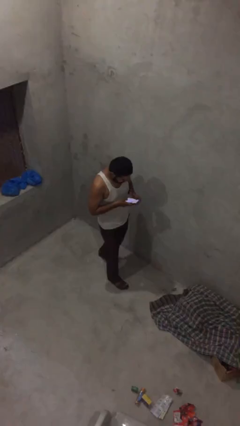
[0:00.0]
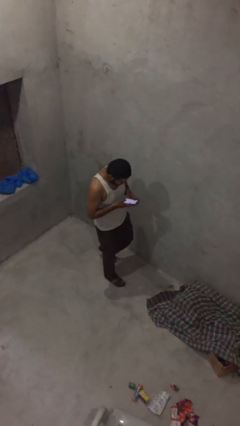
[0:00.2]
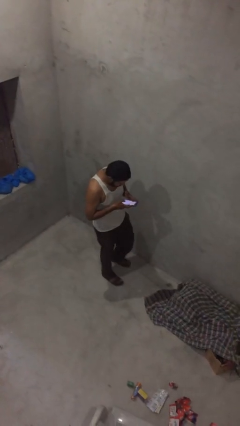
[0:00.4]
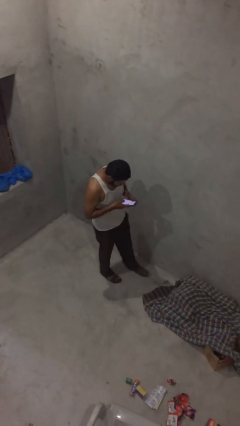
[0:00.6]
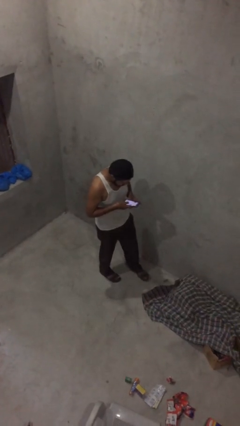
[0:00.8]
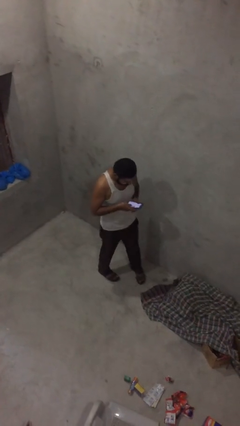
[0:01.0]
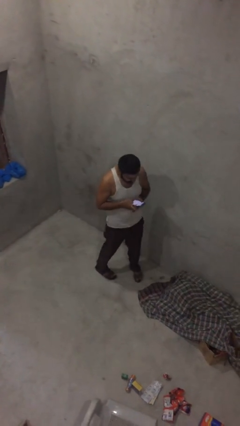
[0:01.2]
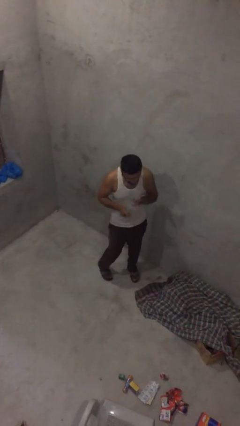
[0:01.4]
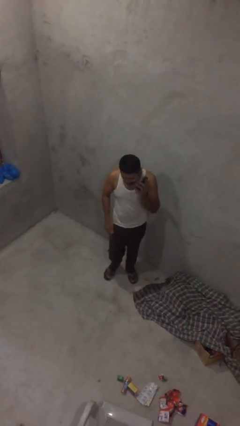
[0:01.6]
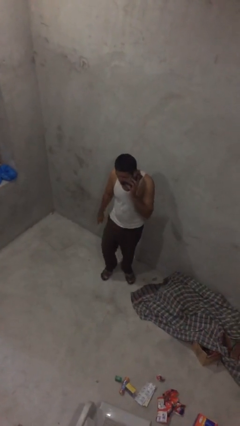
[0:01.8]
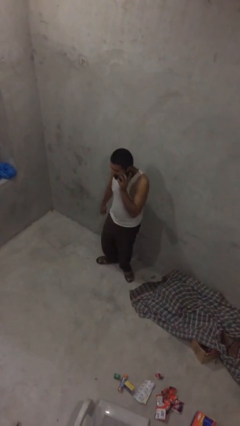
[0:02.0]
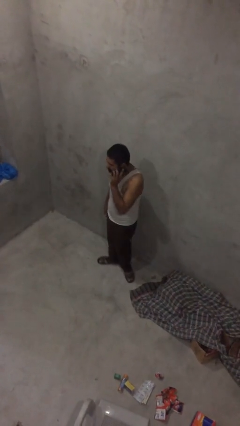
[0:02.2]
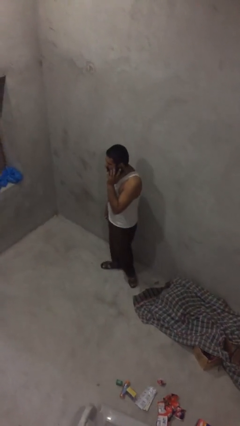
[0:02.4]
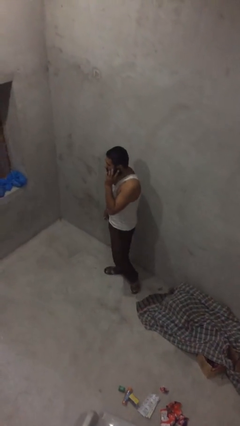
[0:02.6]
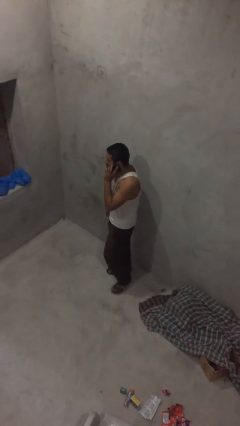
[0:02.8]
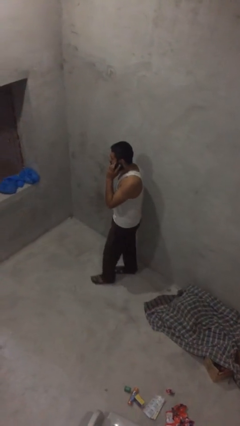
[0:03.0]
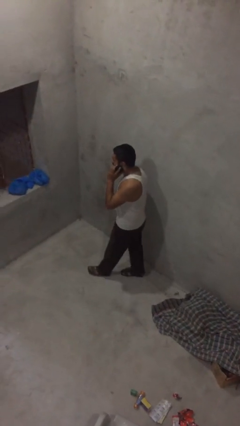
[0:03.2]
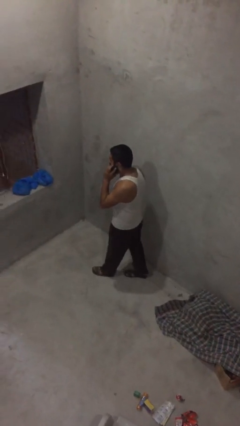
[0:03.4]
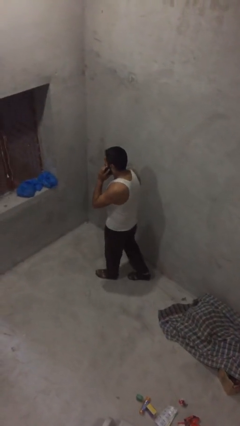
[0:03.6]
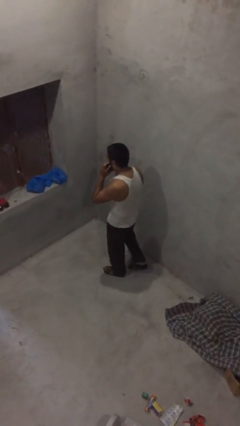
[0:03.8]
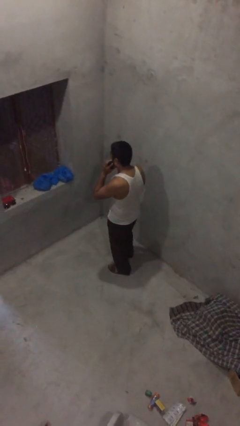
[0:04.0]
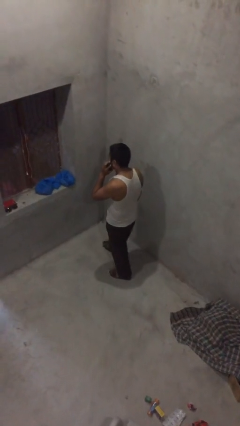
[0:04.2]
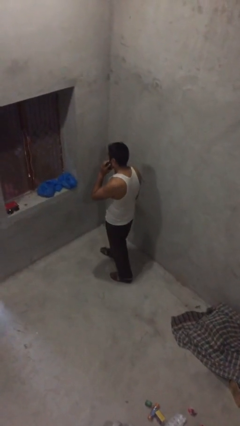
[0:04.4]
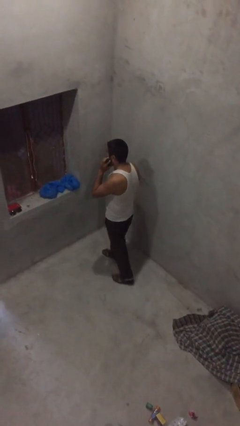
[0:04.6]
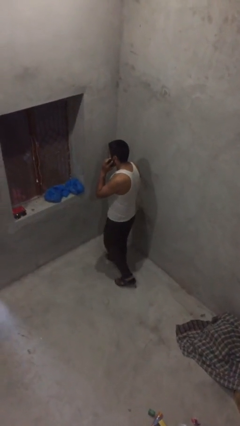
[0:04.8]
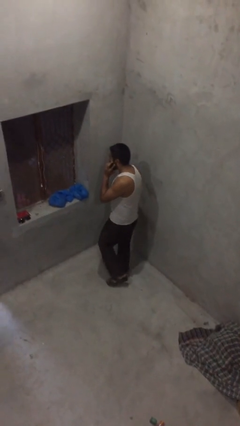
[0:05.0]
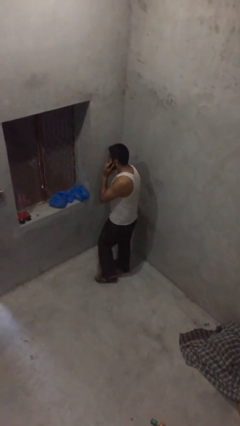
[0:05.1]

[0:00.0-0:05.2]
person talks on phone

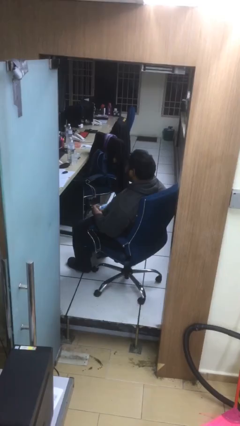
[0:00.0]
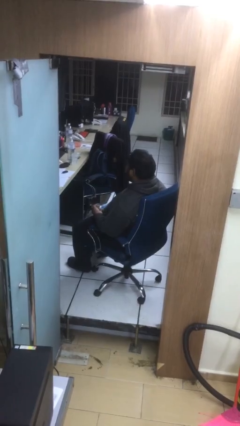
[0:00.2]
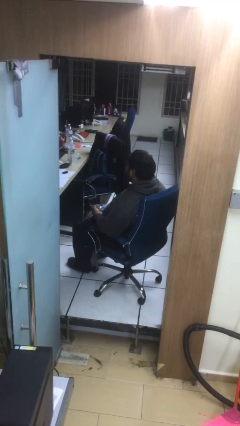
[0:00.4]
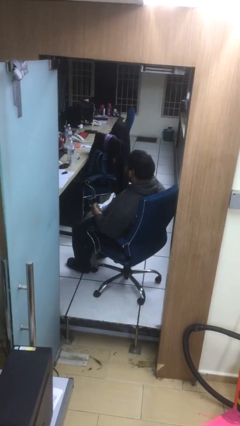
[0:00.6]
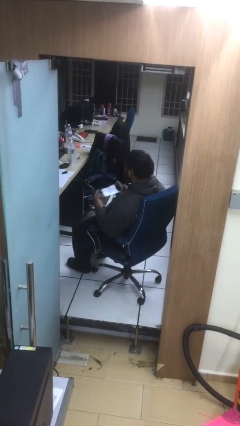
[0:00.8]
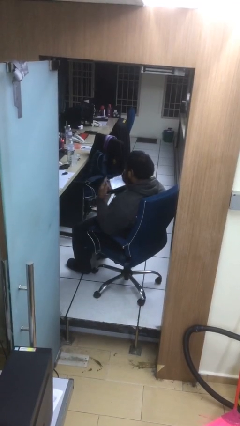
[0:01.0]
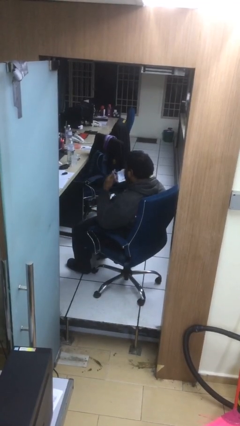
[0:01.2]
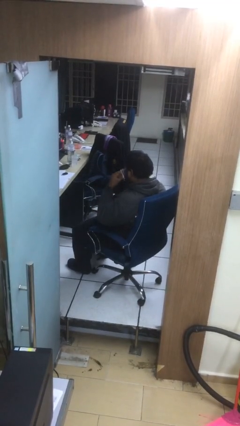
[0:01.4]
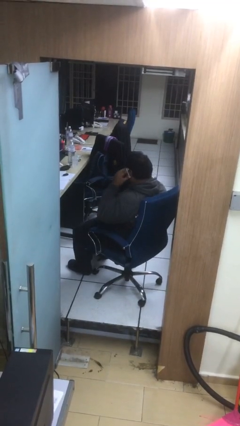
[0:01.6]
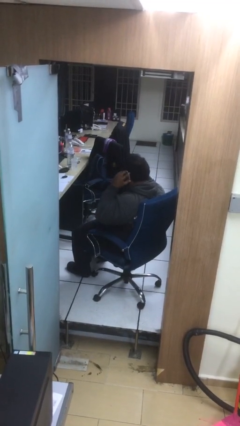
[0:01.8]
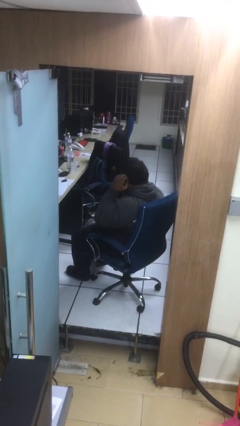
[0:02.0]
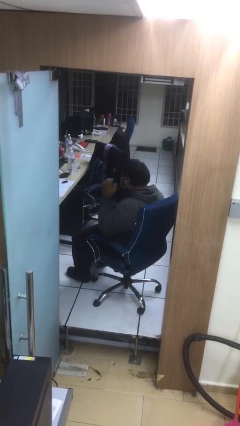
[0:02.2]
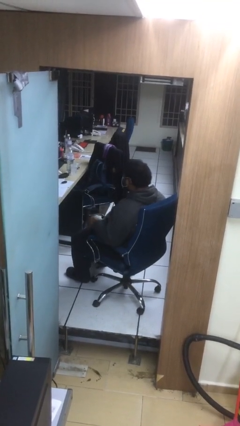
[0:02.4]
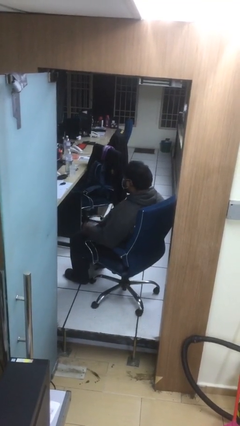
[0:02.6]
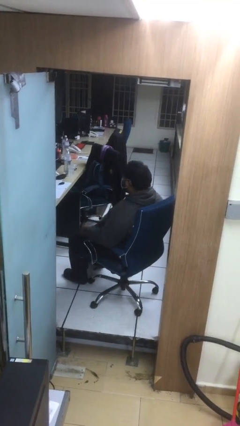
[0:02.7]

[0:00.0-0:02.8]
person puts on facemask

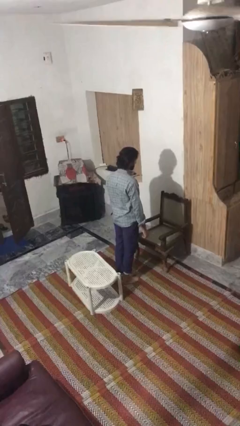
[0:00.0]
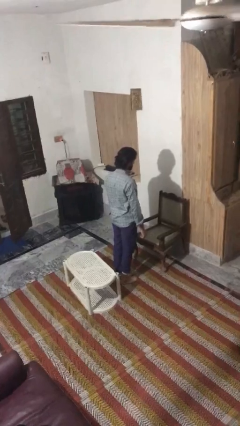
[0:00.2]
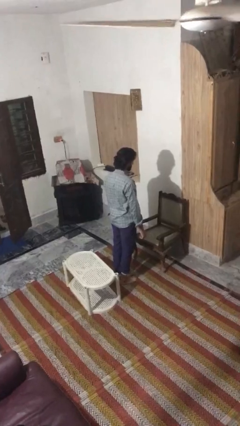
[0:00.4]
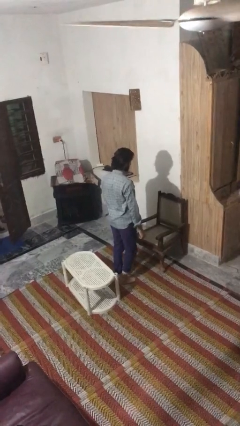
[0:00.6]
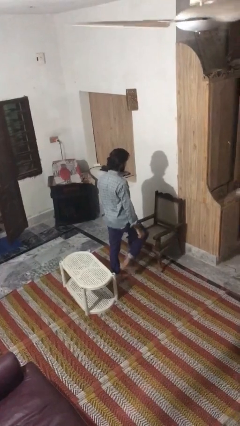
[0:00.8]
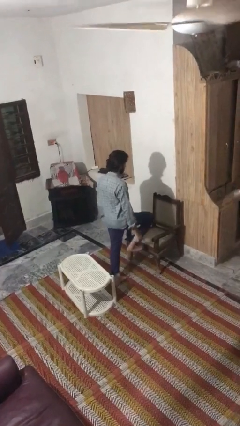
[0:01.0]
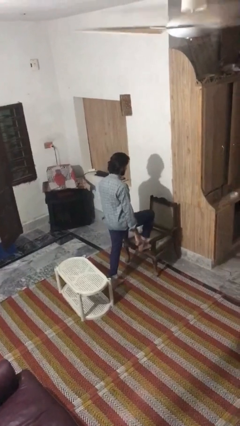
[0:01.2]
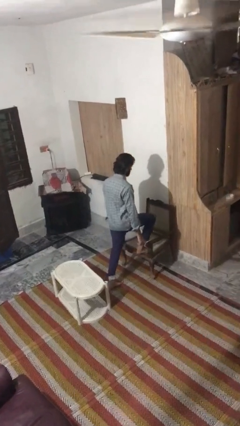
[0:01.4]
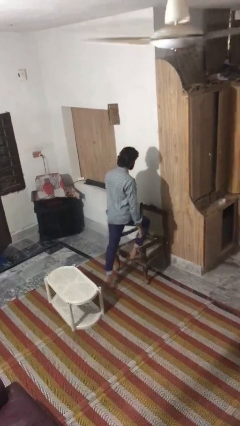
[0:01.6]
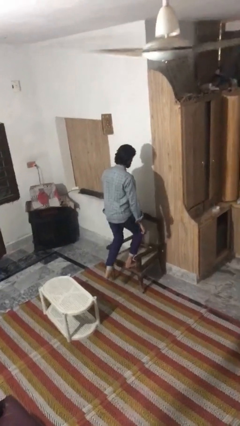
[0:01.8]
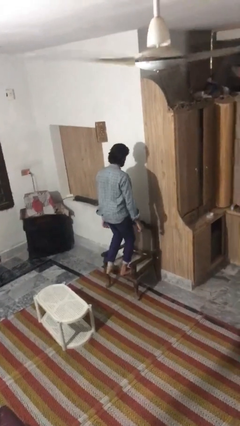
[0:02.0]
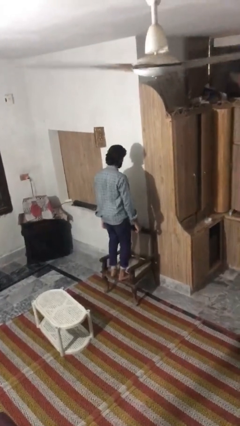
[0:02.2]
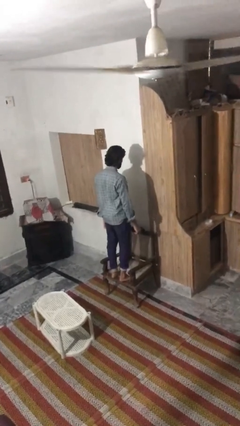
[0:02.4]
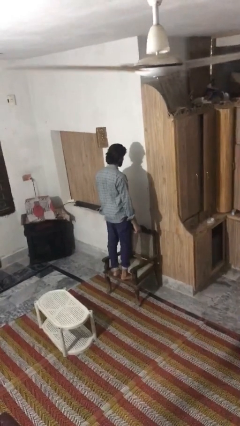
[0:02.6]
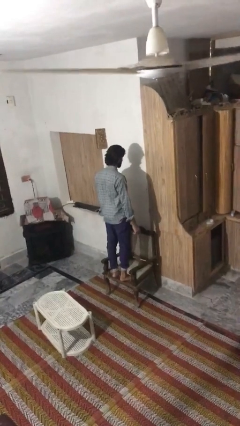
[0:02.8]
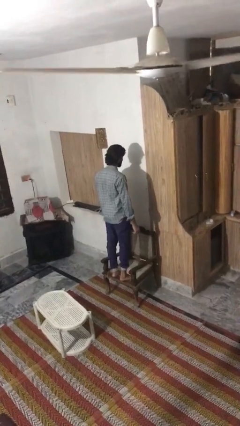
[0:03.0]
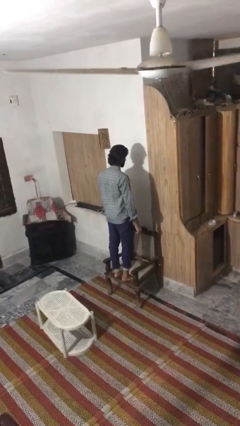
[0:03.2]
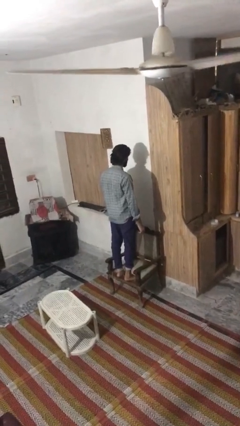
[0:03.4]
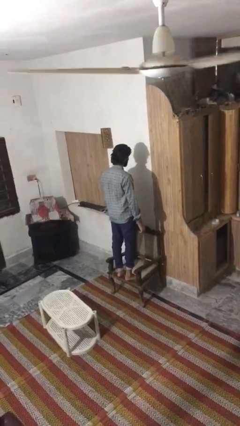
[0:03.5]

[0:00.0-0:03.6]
person climbs on chair

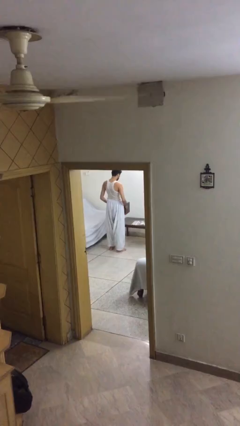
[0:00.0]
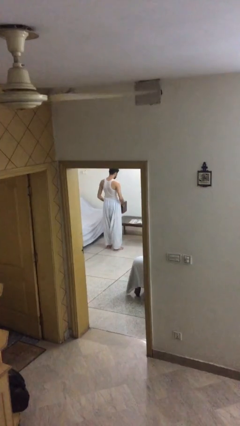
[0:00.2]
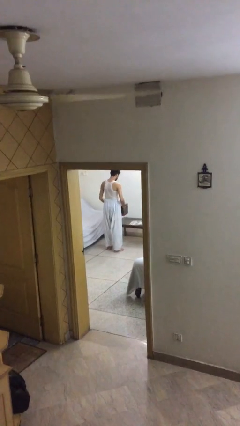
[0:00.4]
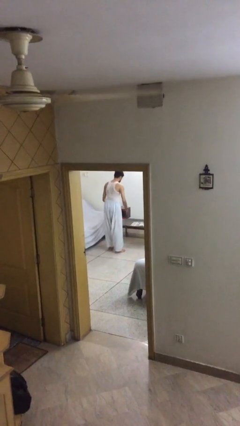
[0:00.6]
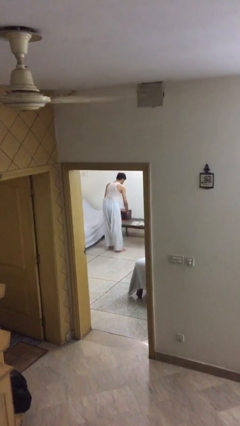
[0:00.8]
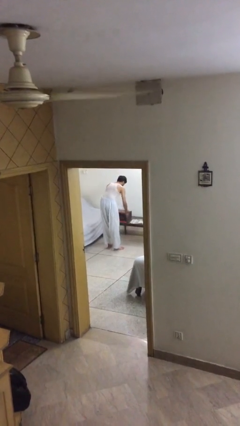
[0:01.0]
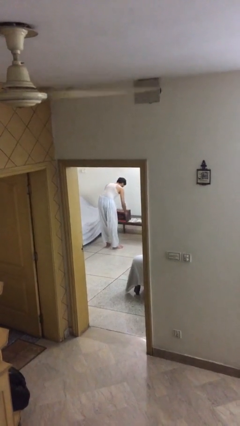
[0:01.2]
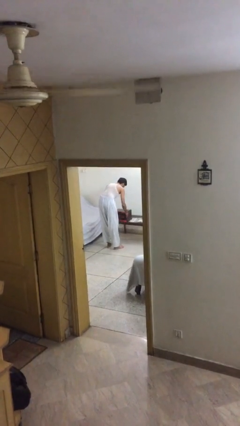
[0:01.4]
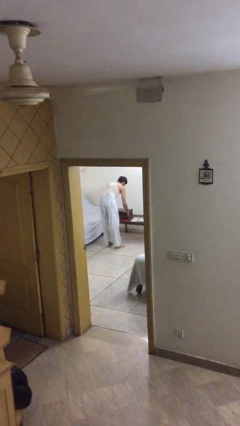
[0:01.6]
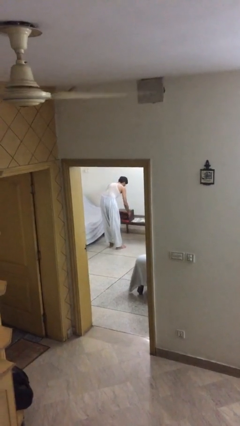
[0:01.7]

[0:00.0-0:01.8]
person puts down object on table

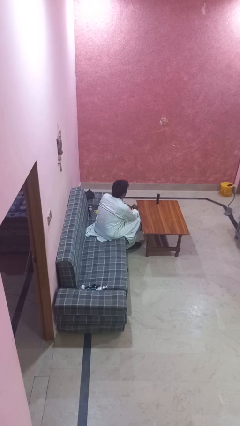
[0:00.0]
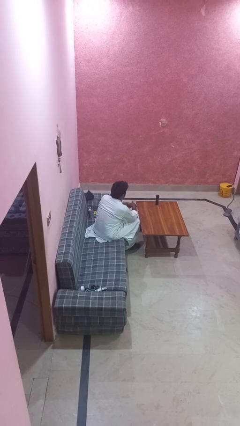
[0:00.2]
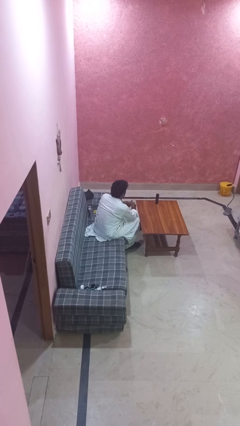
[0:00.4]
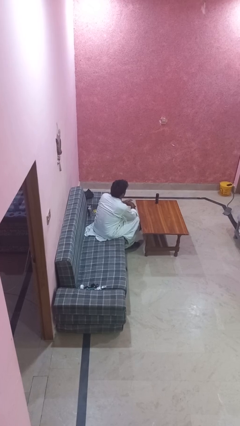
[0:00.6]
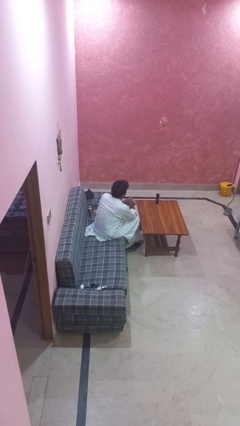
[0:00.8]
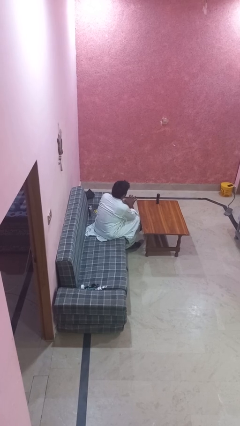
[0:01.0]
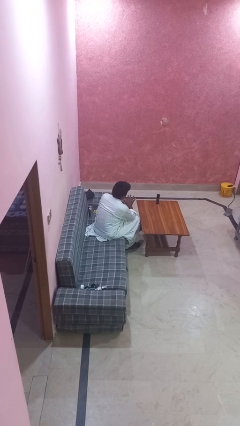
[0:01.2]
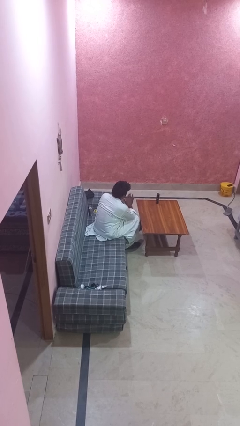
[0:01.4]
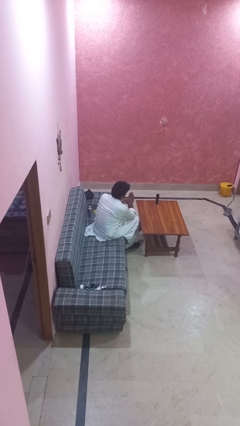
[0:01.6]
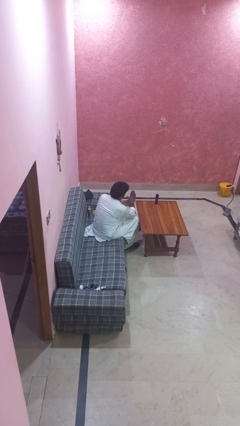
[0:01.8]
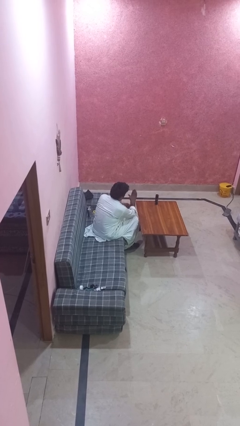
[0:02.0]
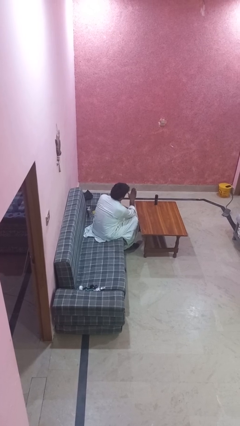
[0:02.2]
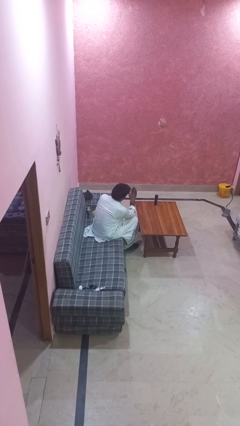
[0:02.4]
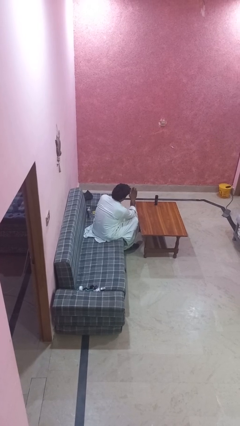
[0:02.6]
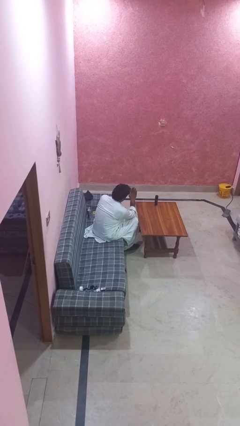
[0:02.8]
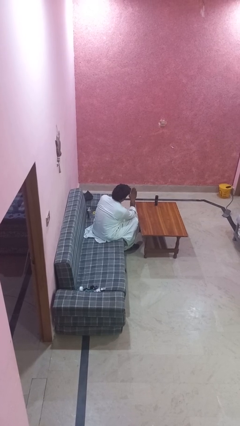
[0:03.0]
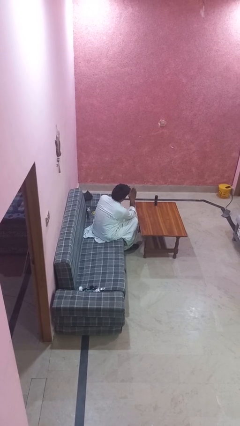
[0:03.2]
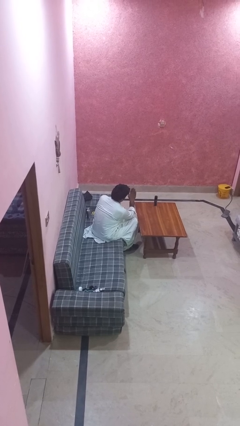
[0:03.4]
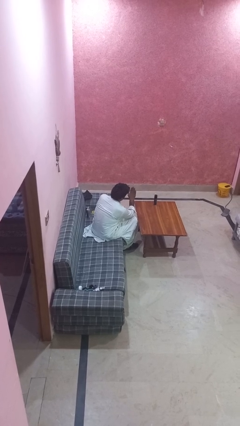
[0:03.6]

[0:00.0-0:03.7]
person puts on ring

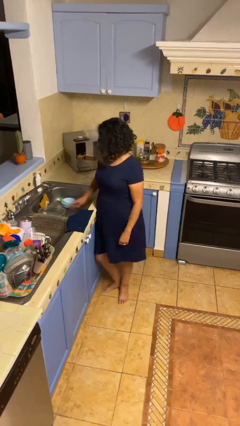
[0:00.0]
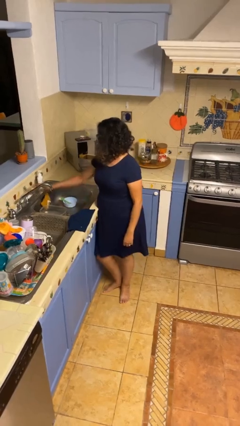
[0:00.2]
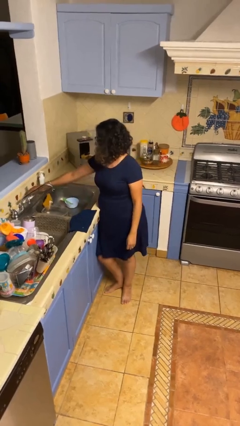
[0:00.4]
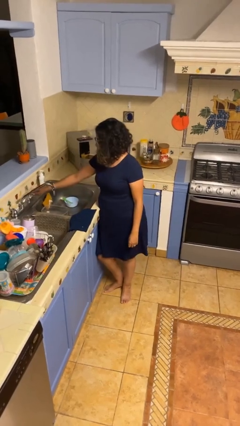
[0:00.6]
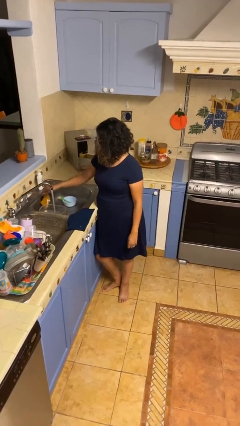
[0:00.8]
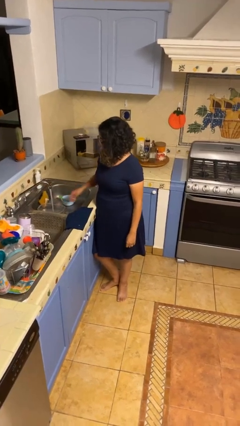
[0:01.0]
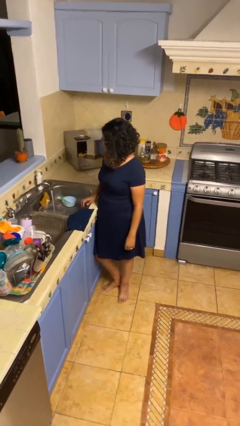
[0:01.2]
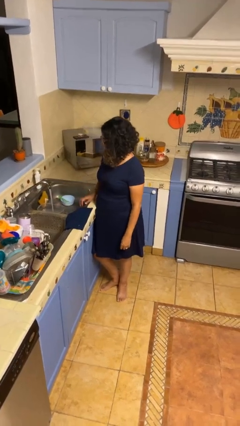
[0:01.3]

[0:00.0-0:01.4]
person turns on faucet
